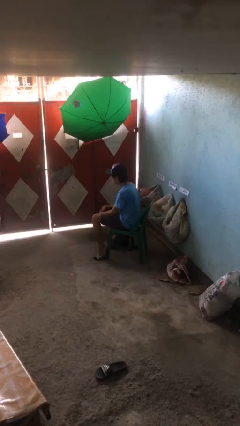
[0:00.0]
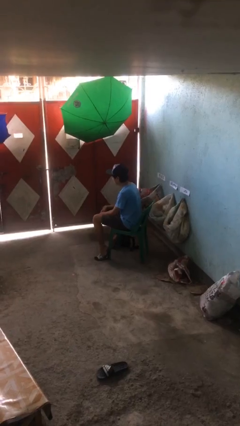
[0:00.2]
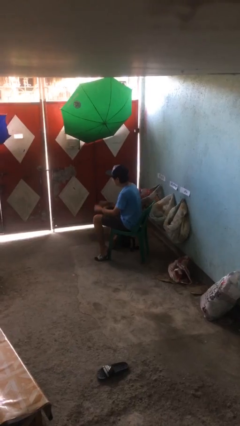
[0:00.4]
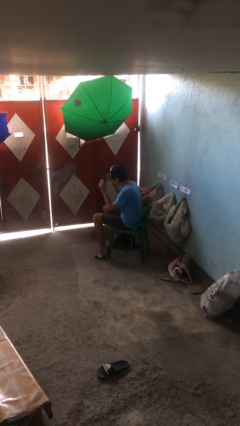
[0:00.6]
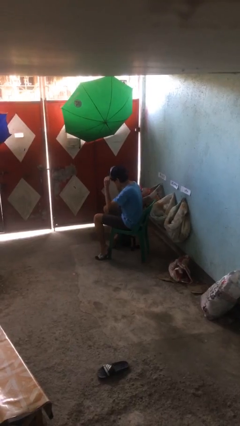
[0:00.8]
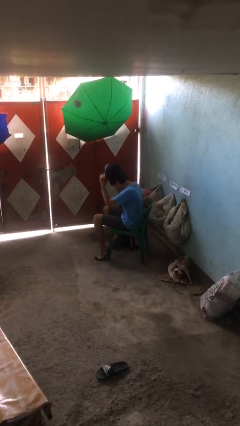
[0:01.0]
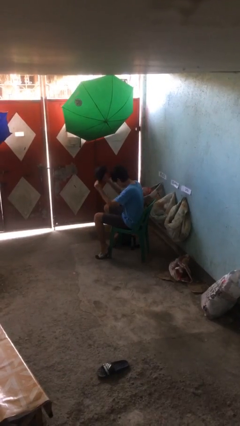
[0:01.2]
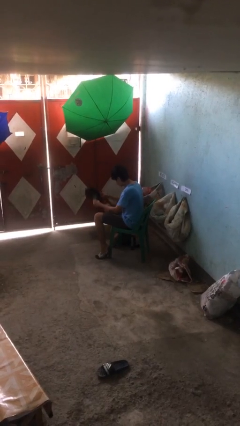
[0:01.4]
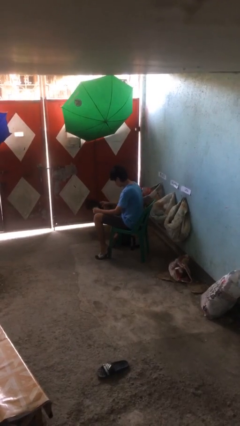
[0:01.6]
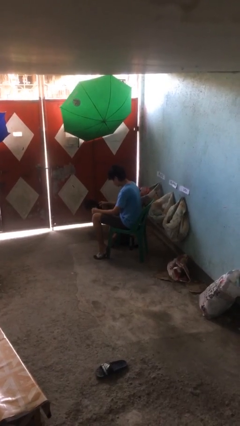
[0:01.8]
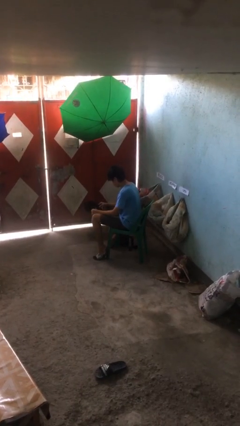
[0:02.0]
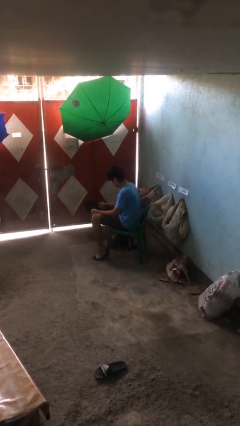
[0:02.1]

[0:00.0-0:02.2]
person takes off hat

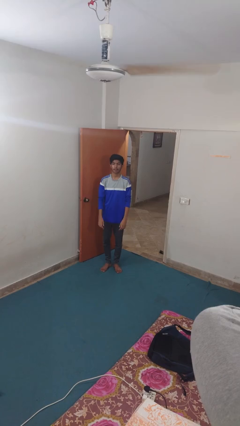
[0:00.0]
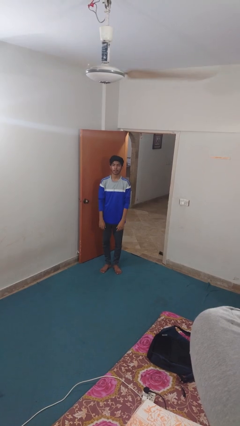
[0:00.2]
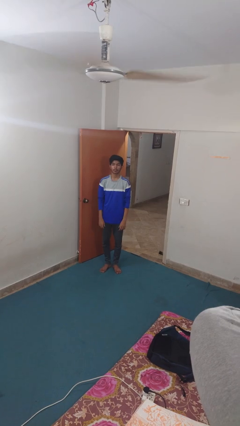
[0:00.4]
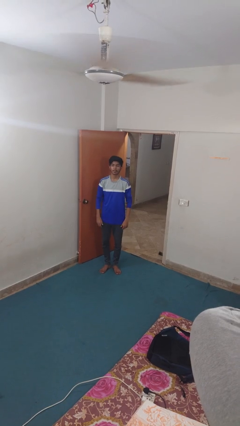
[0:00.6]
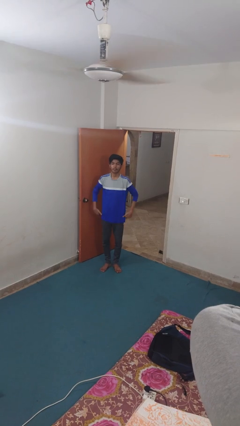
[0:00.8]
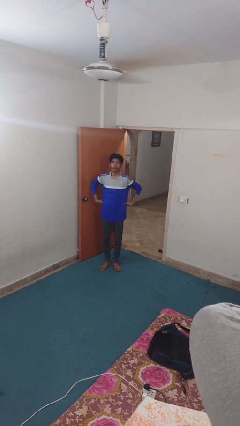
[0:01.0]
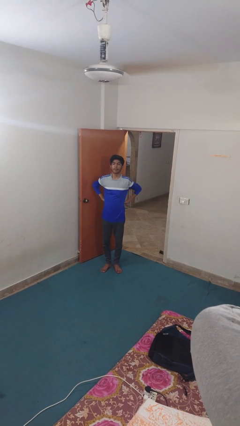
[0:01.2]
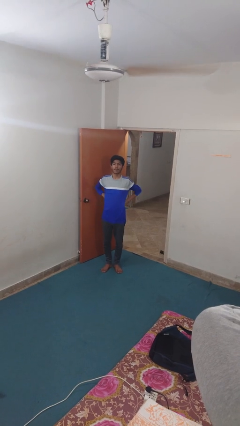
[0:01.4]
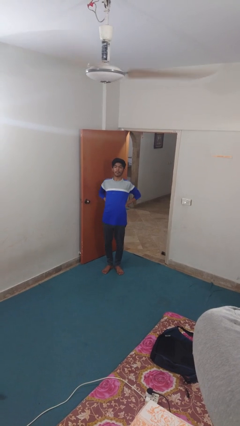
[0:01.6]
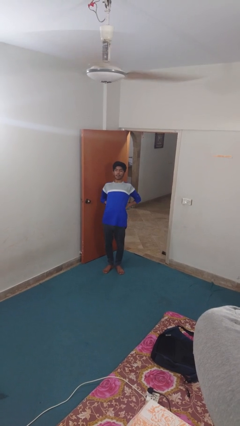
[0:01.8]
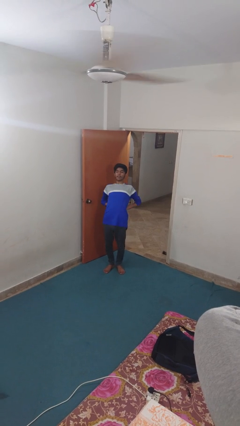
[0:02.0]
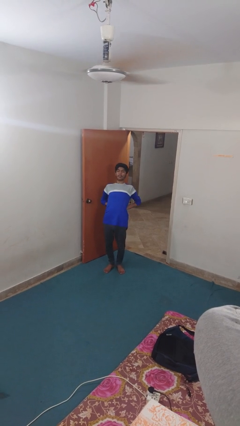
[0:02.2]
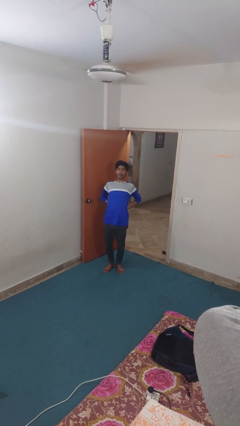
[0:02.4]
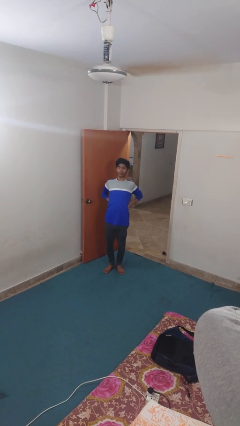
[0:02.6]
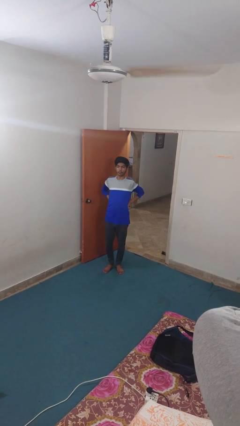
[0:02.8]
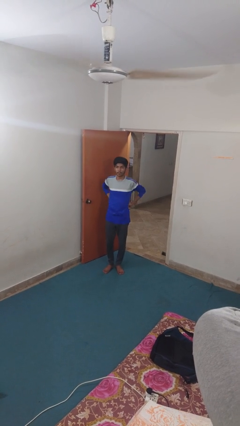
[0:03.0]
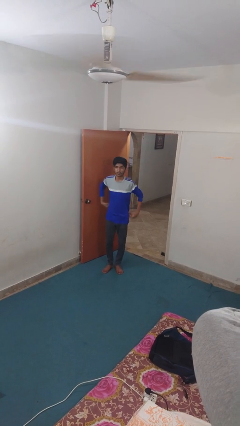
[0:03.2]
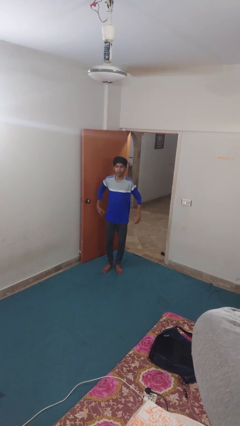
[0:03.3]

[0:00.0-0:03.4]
person stretches back

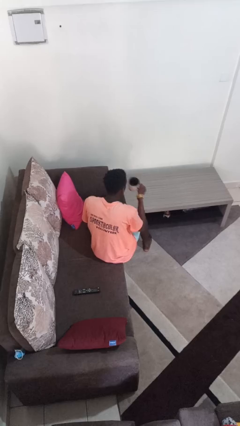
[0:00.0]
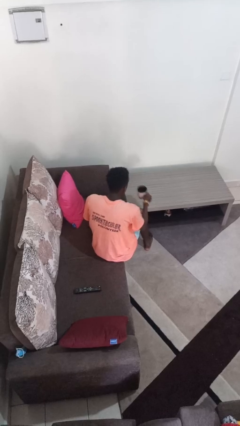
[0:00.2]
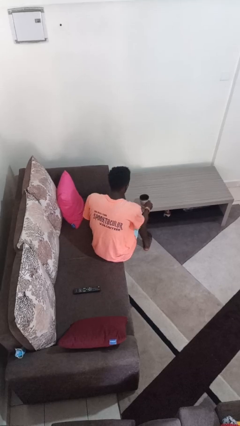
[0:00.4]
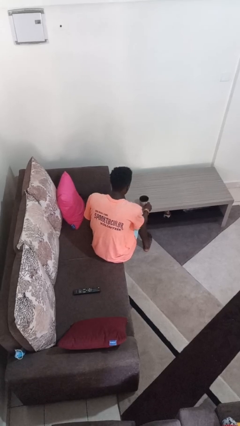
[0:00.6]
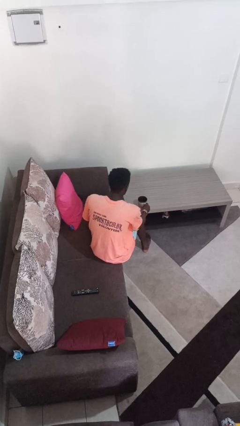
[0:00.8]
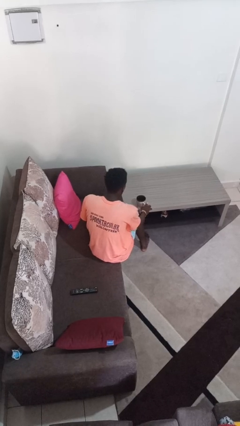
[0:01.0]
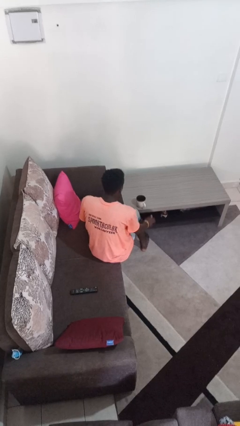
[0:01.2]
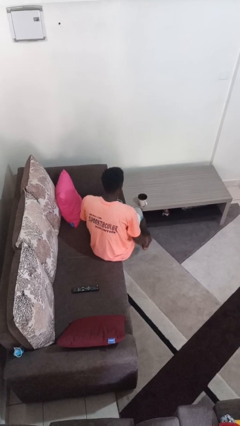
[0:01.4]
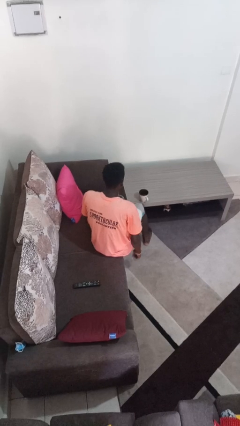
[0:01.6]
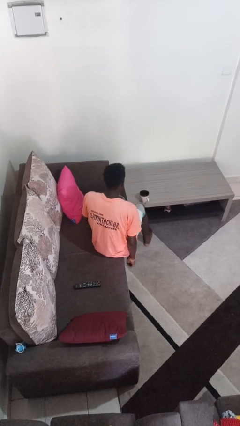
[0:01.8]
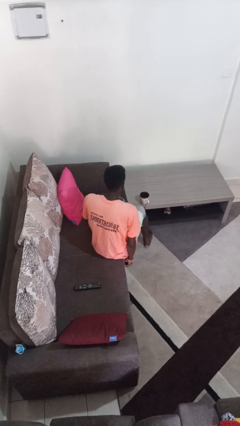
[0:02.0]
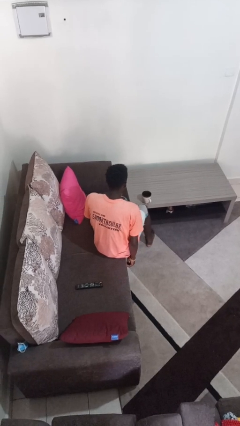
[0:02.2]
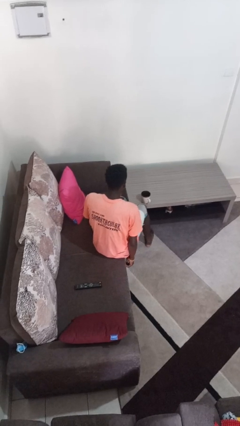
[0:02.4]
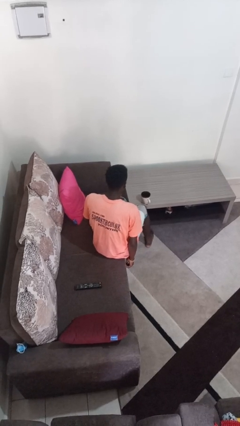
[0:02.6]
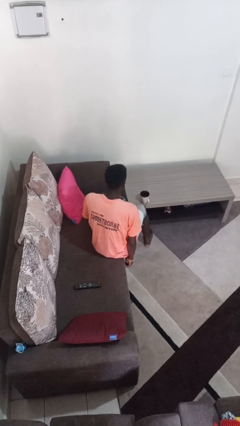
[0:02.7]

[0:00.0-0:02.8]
person puts down object on table

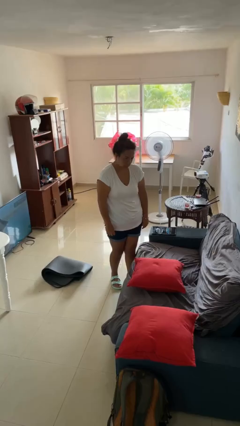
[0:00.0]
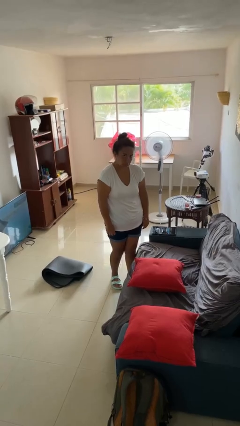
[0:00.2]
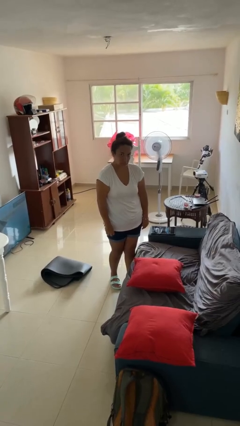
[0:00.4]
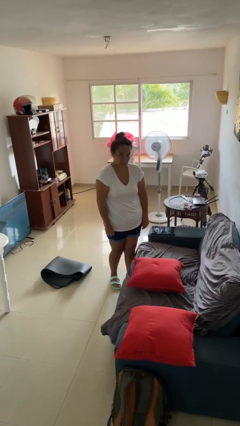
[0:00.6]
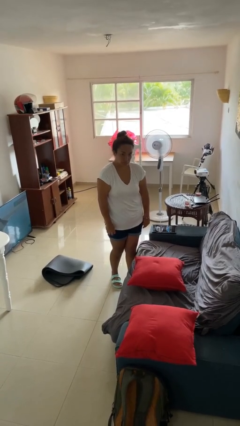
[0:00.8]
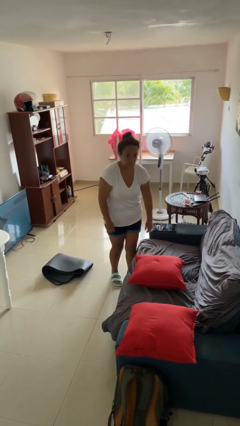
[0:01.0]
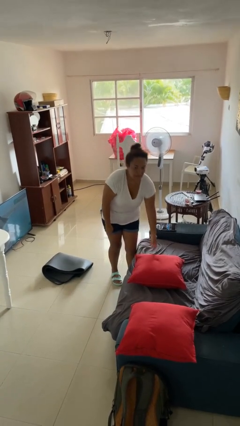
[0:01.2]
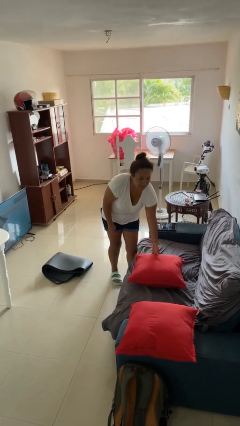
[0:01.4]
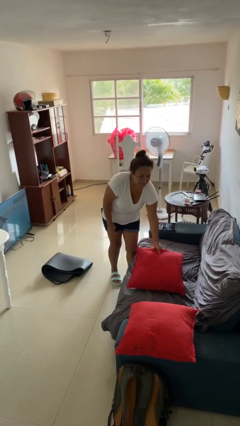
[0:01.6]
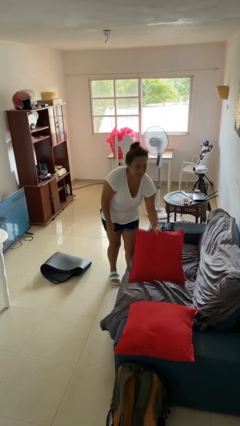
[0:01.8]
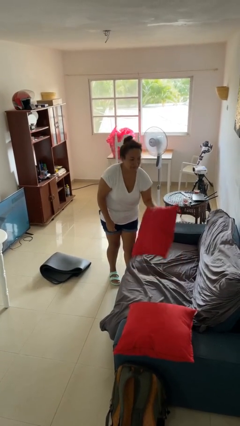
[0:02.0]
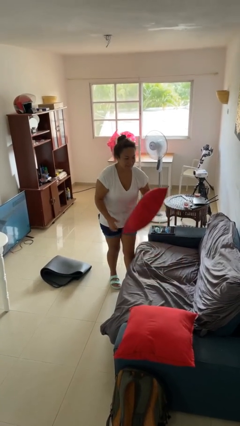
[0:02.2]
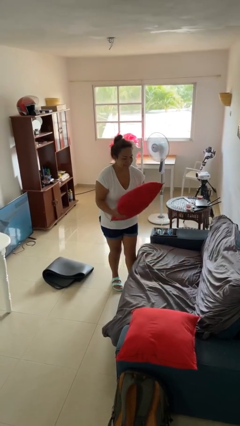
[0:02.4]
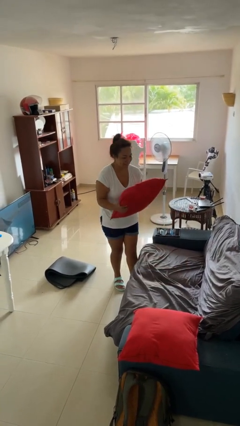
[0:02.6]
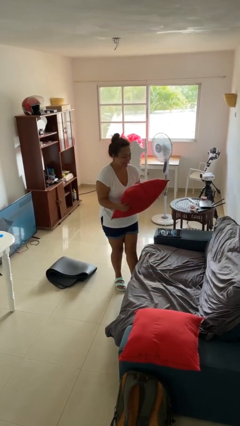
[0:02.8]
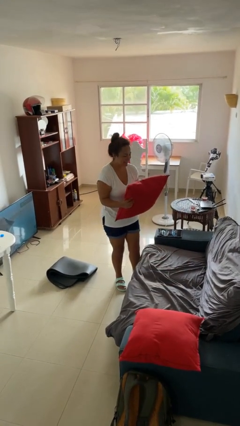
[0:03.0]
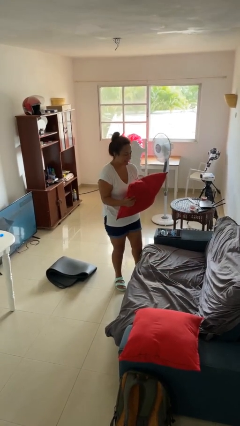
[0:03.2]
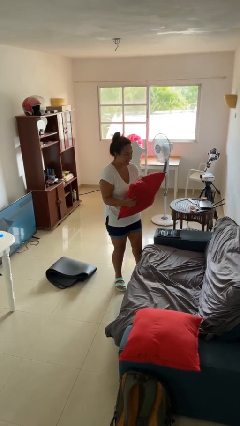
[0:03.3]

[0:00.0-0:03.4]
person picks up object from couch

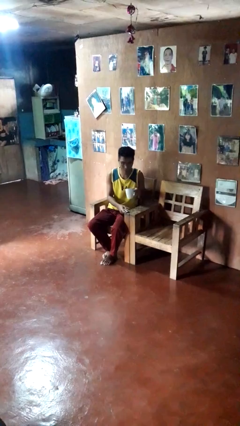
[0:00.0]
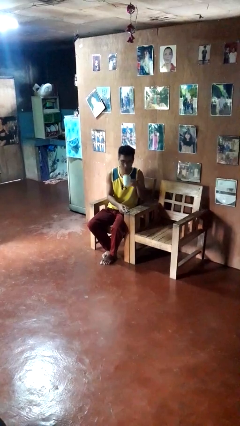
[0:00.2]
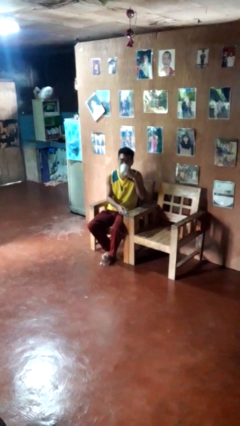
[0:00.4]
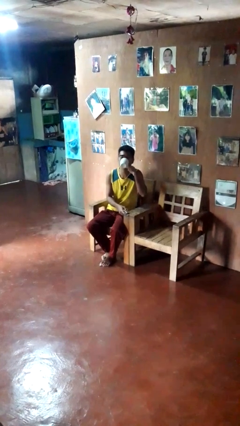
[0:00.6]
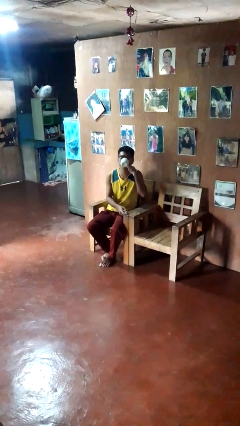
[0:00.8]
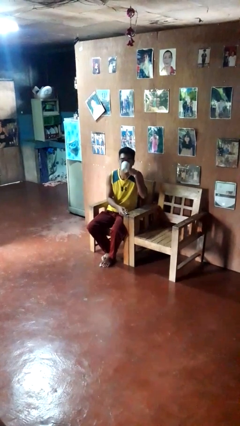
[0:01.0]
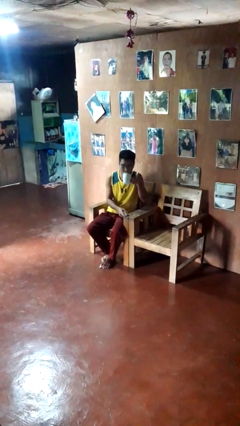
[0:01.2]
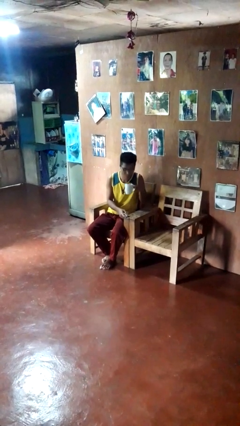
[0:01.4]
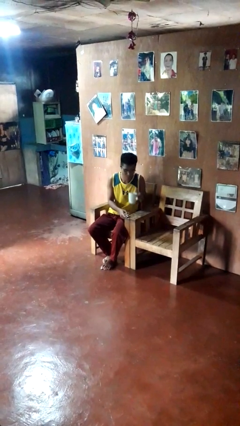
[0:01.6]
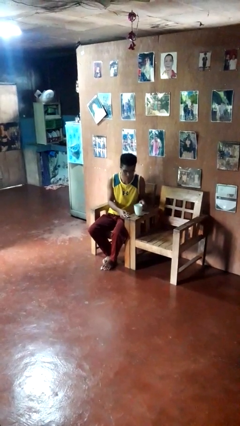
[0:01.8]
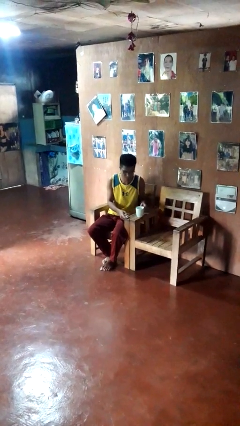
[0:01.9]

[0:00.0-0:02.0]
person drinks from cup

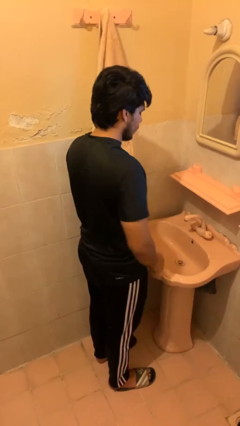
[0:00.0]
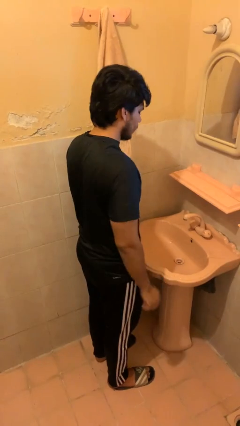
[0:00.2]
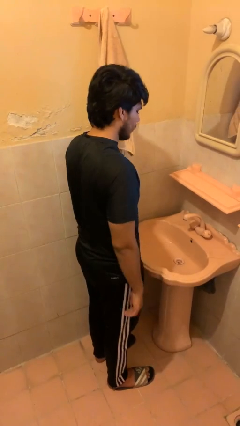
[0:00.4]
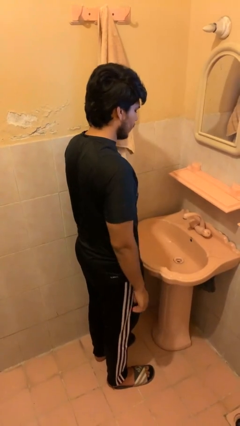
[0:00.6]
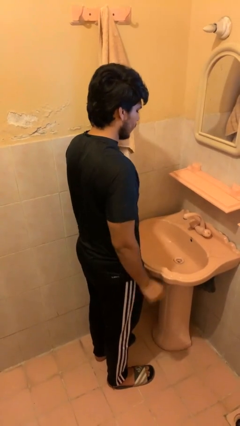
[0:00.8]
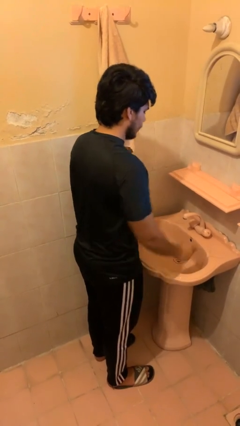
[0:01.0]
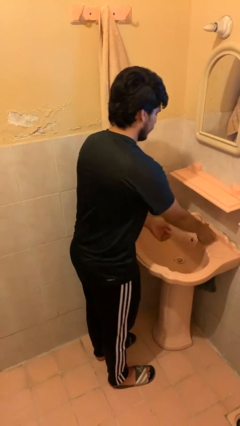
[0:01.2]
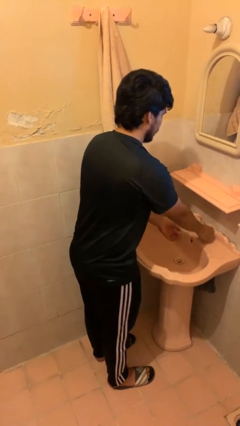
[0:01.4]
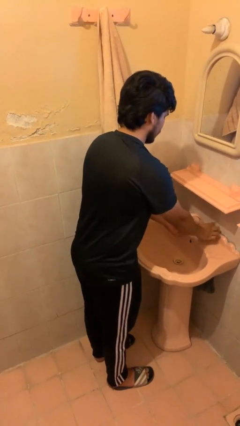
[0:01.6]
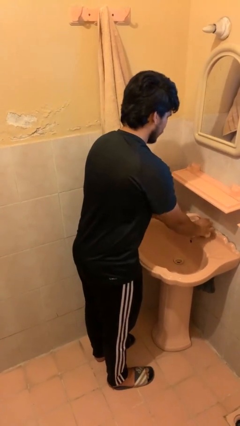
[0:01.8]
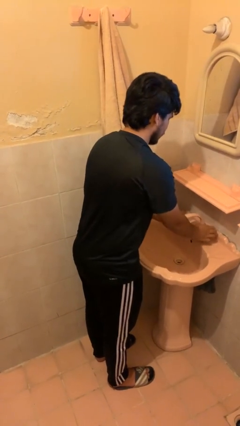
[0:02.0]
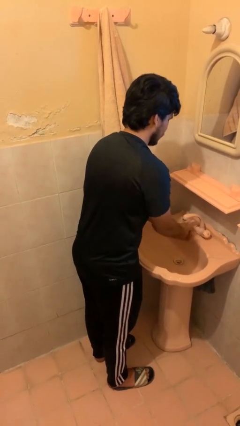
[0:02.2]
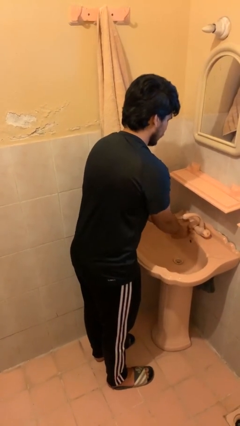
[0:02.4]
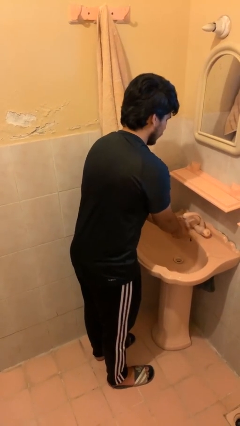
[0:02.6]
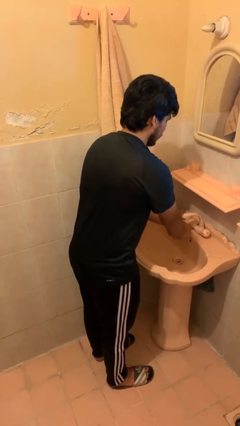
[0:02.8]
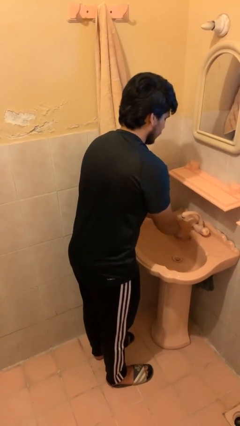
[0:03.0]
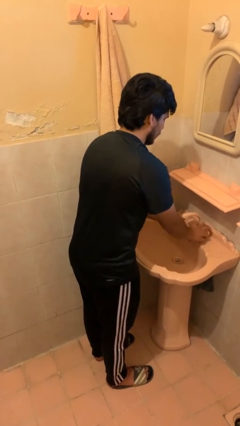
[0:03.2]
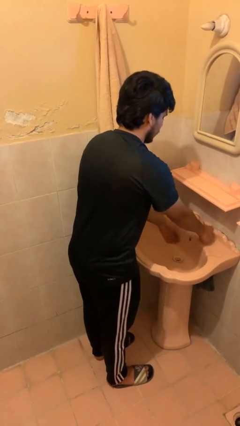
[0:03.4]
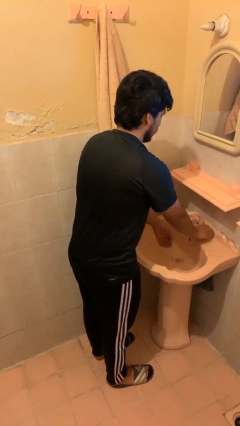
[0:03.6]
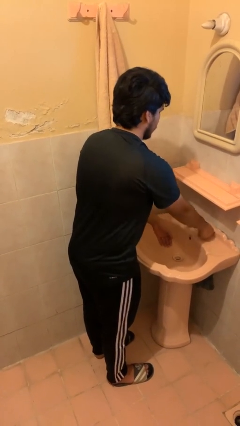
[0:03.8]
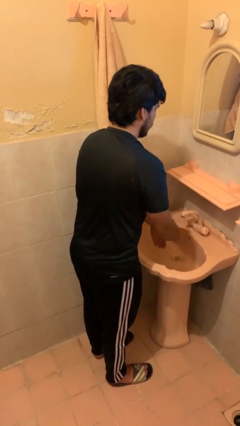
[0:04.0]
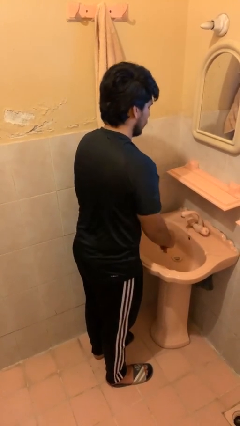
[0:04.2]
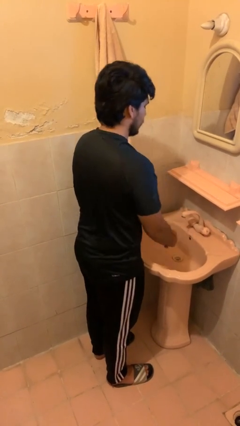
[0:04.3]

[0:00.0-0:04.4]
person washes hands
